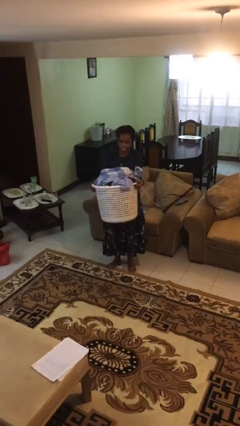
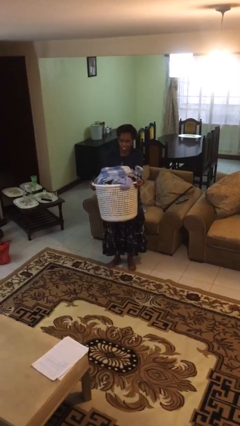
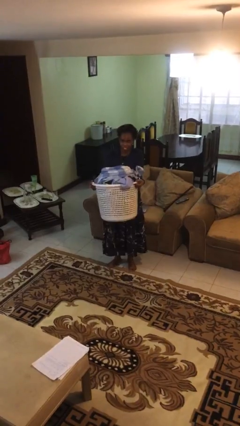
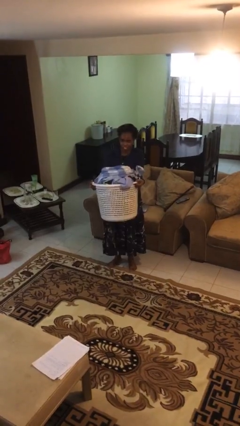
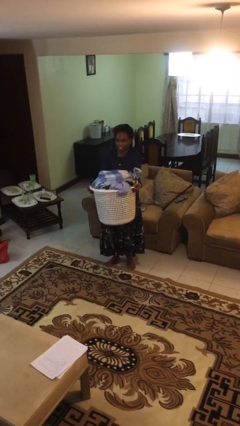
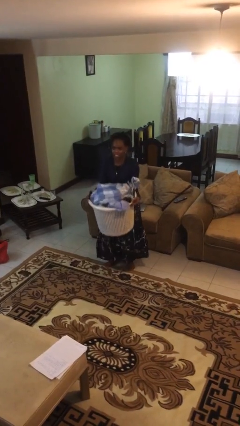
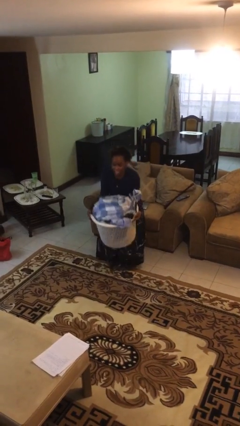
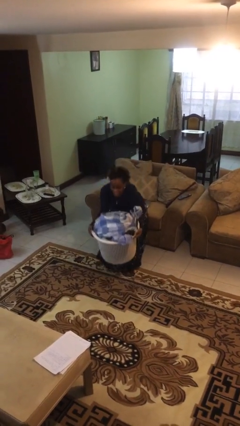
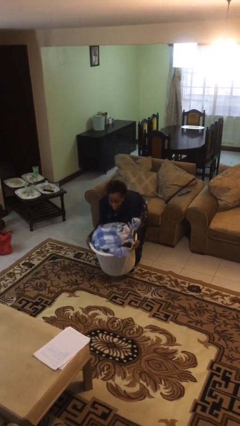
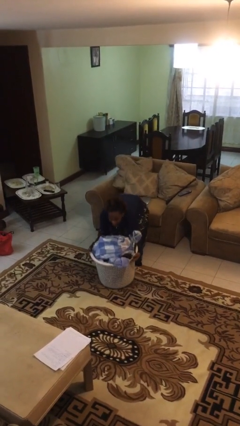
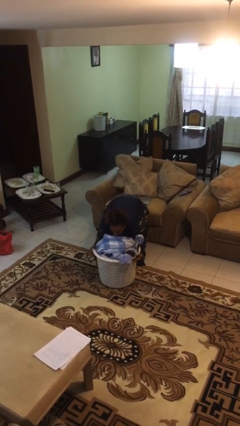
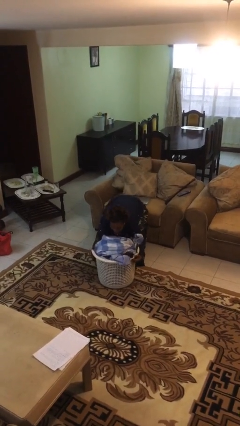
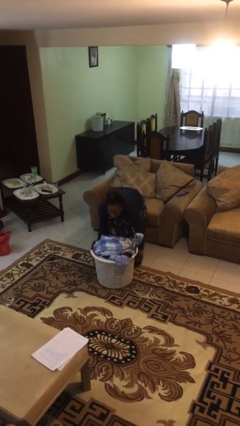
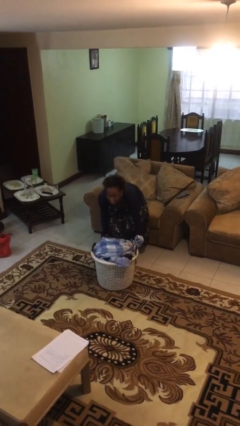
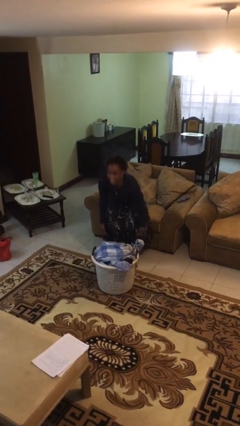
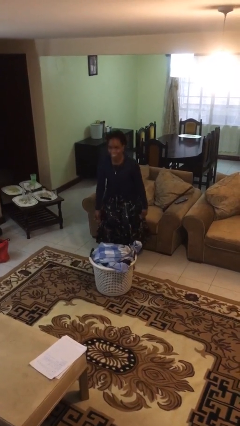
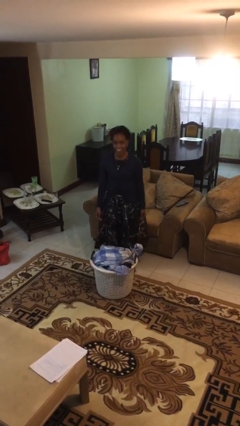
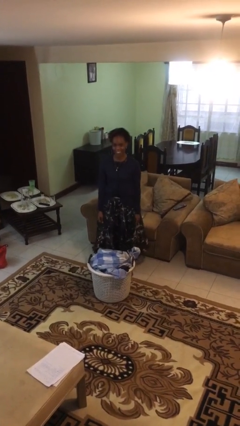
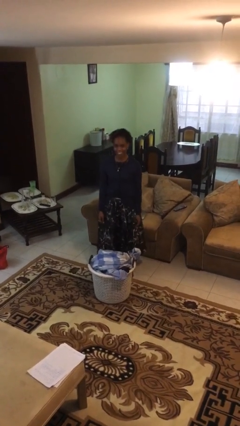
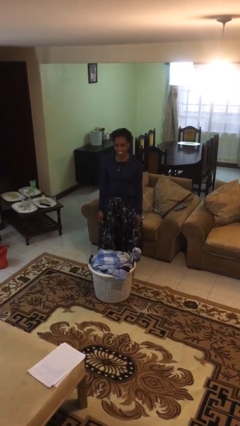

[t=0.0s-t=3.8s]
person puts down object on floor

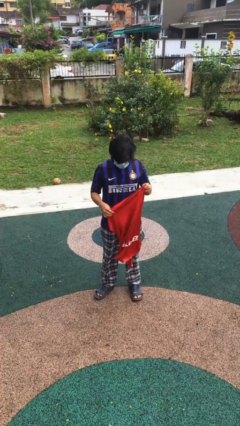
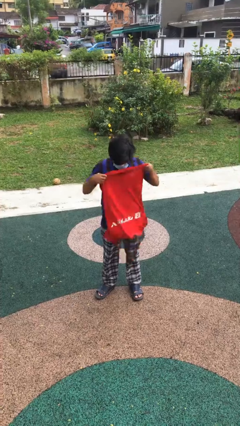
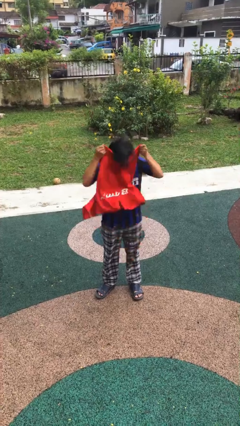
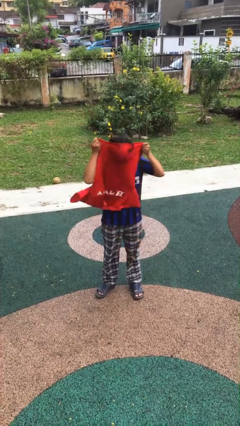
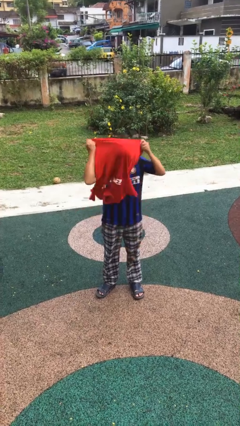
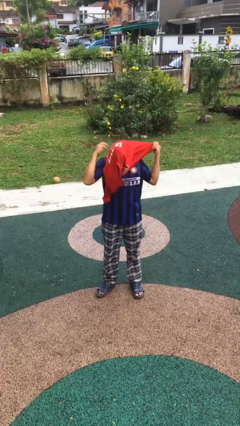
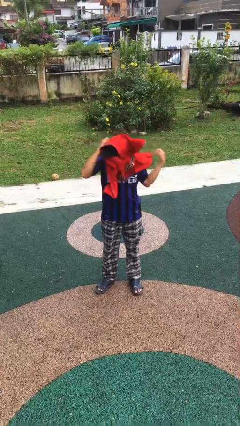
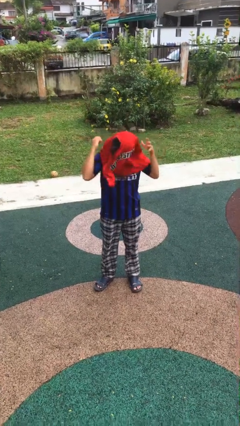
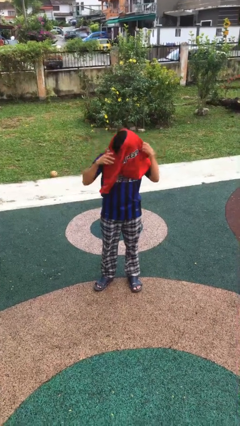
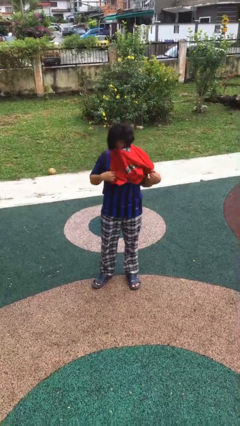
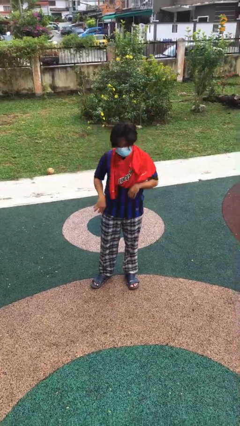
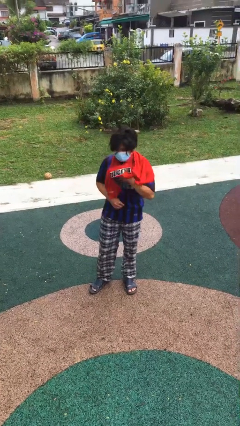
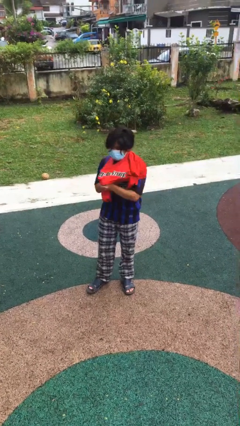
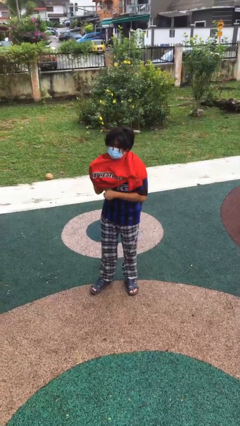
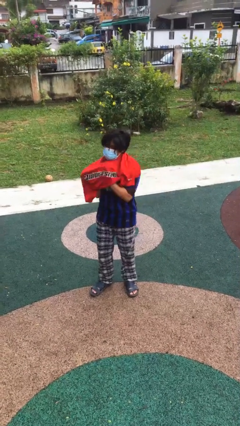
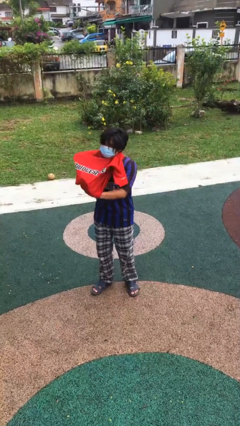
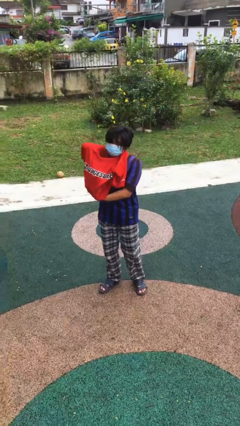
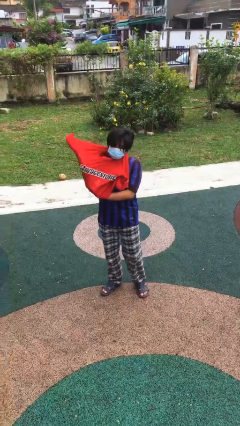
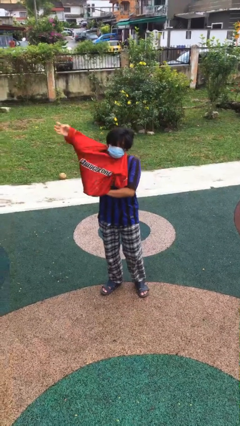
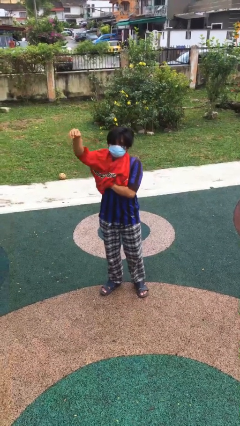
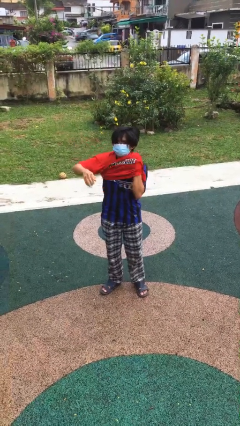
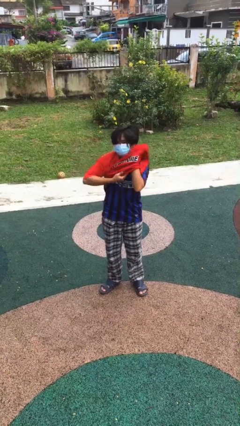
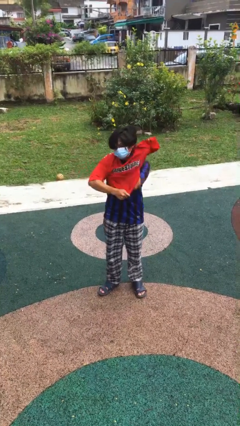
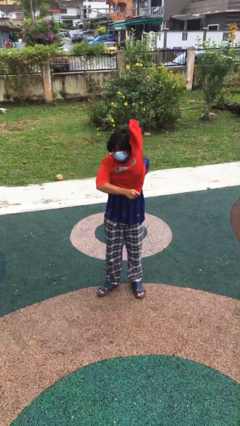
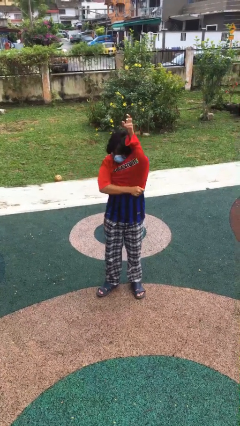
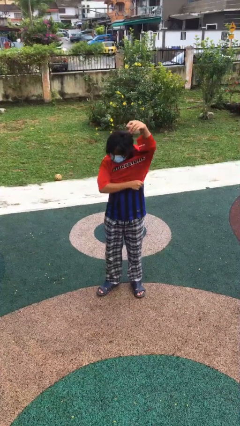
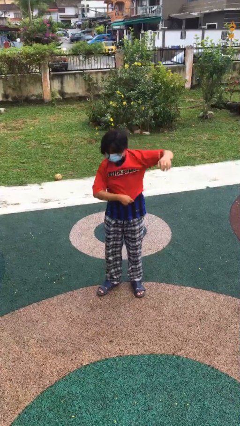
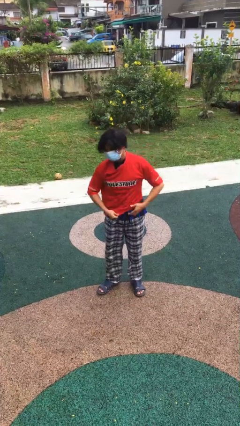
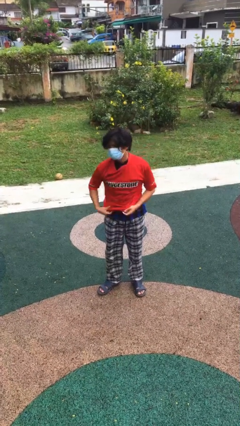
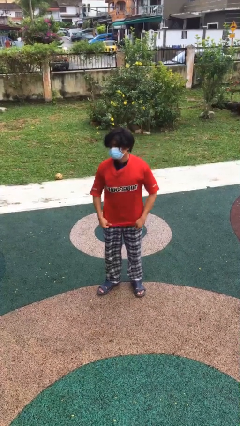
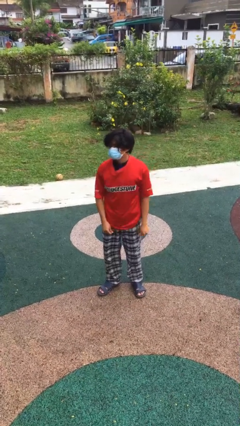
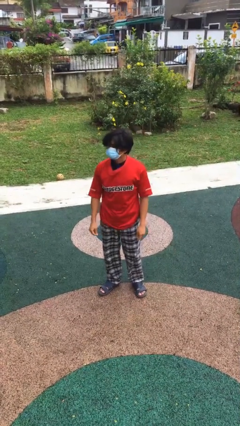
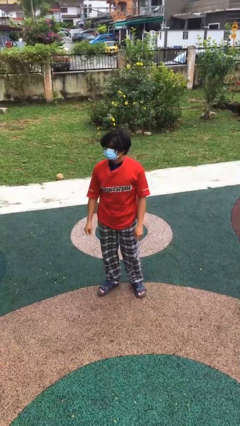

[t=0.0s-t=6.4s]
person puts on shirt

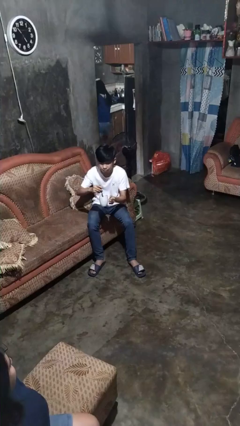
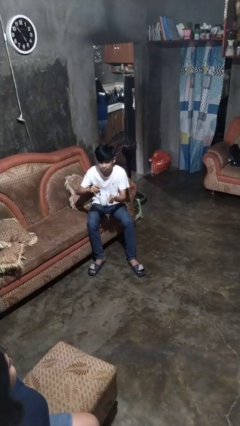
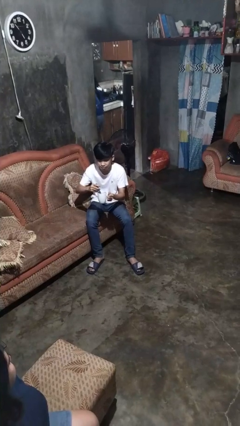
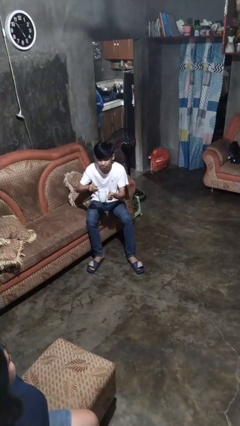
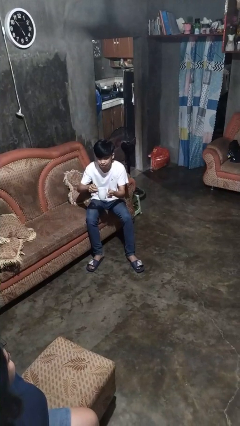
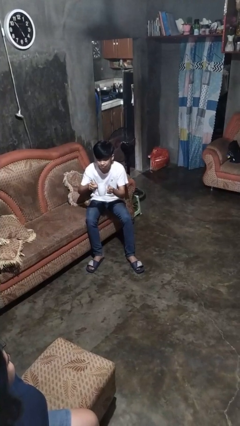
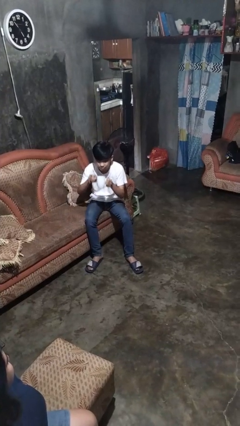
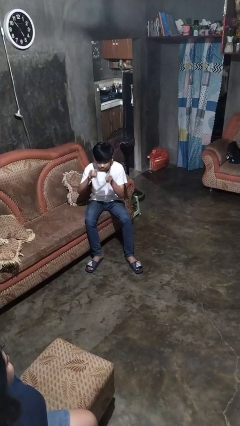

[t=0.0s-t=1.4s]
person drinks from mug

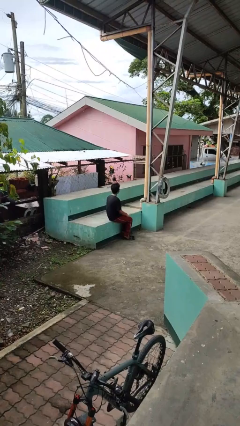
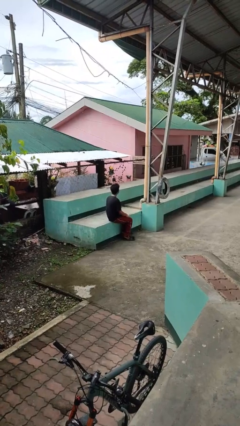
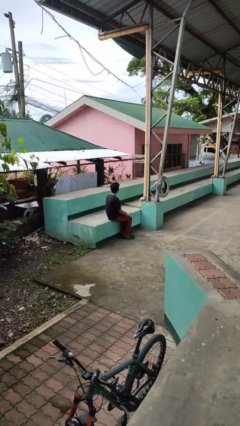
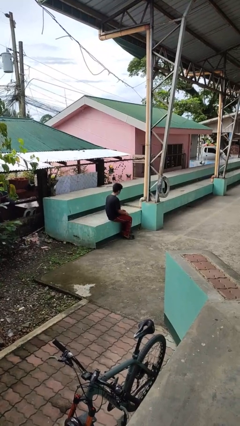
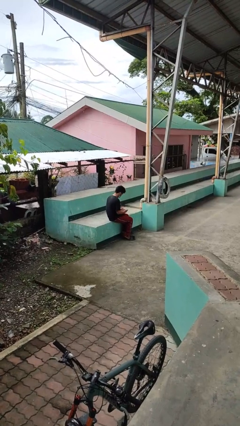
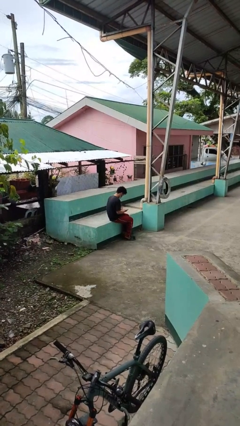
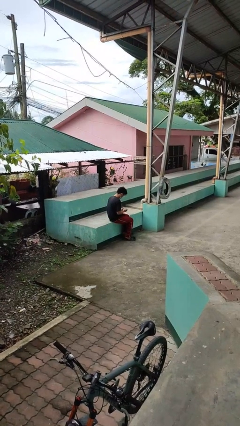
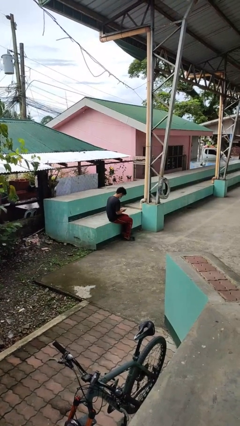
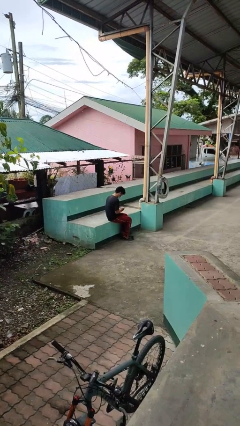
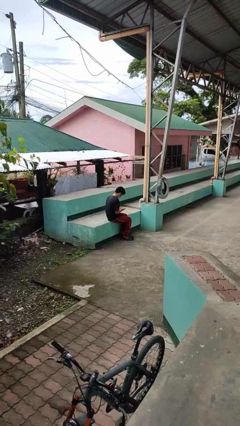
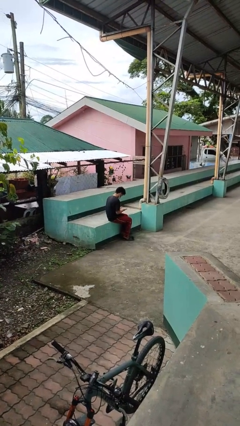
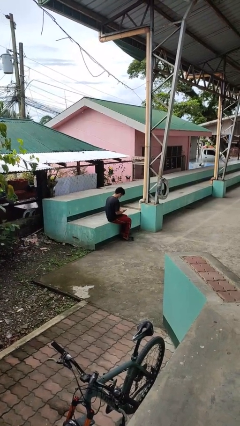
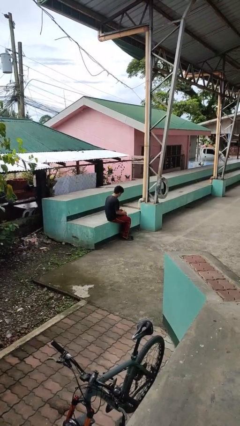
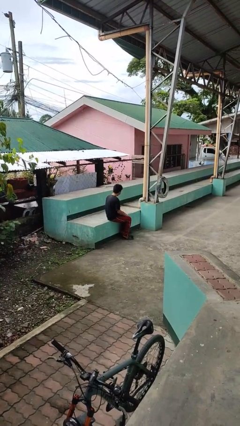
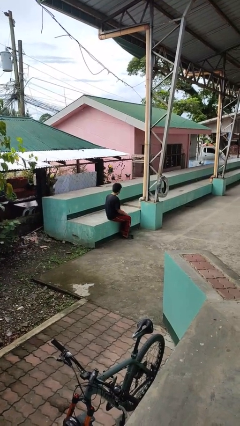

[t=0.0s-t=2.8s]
person looks at hands in lap

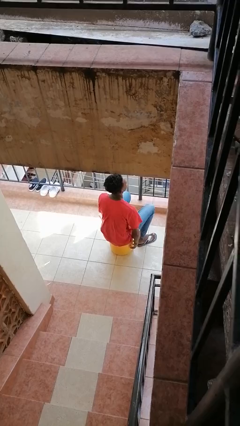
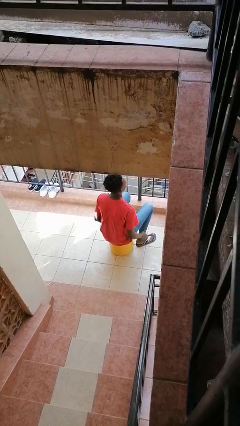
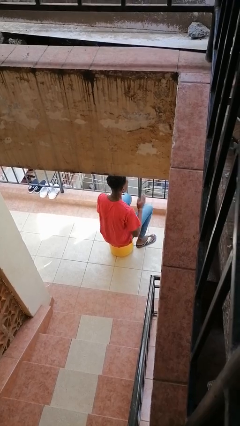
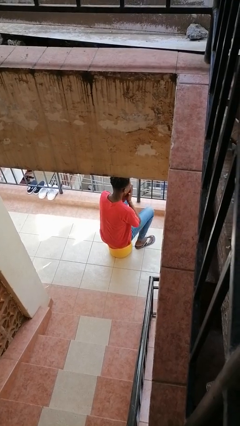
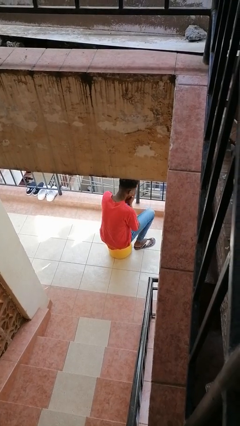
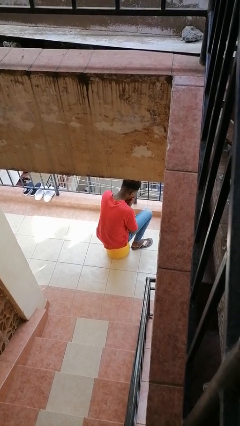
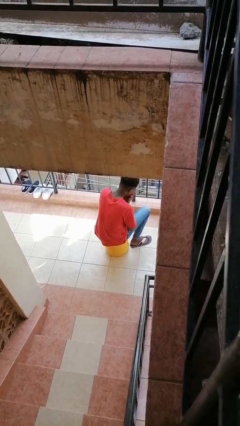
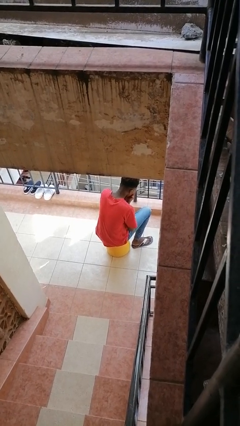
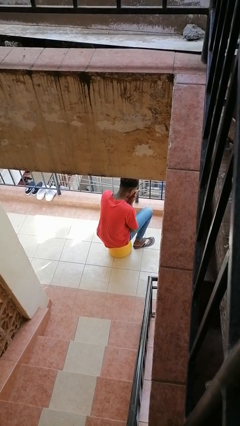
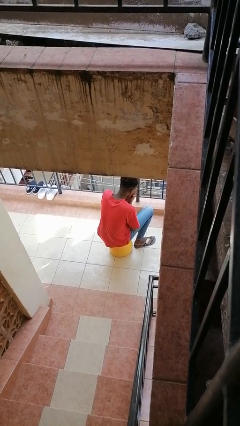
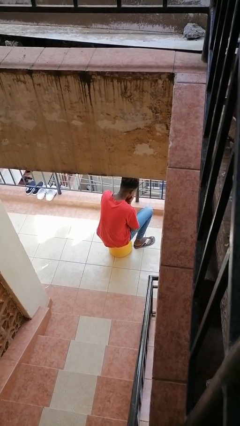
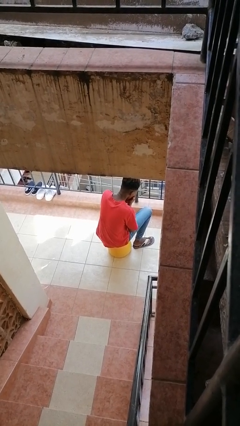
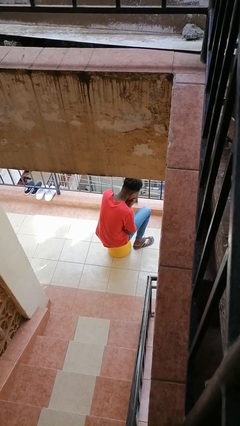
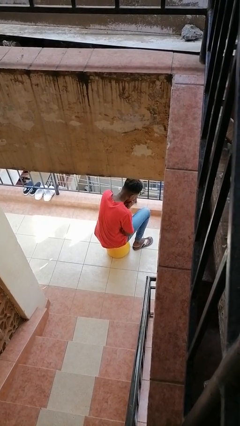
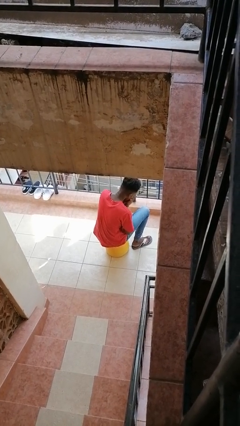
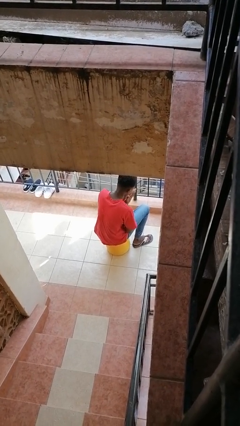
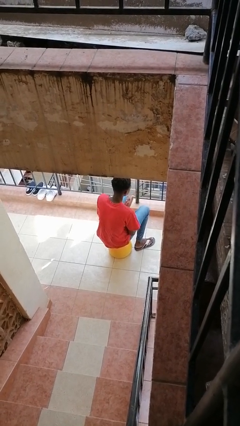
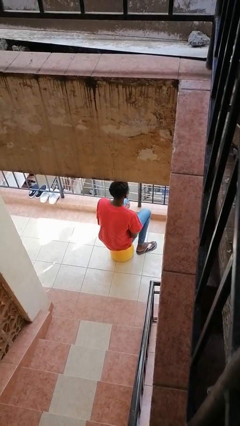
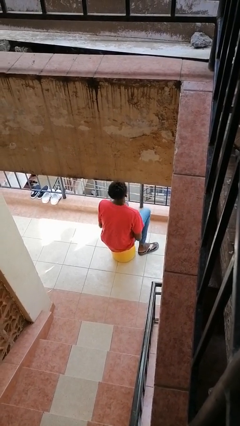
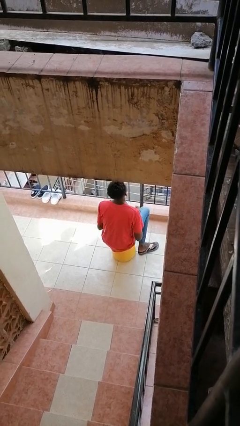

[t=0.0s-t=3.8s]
person blows into hands
